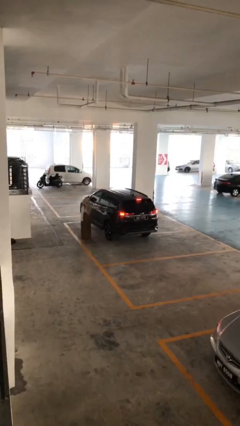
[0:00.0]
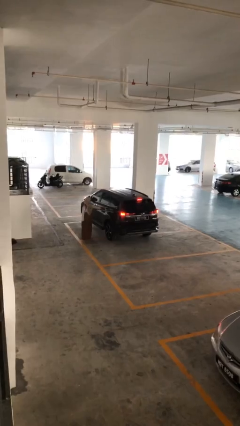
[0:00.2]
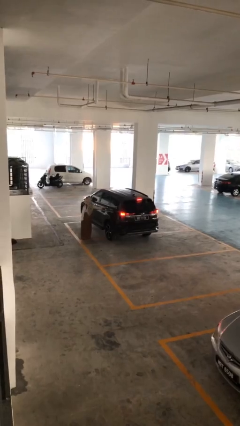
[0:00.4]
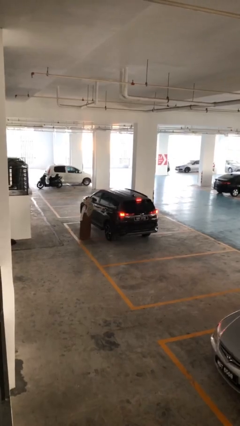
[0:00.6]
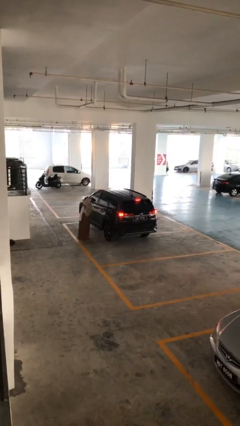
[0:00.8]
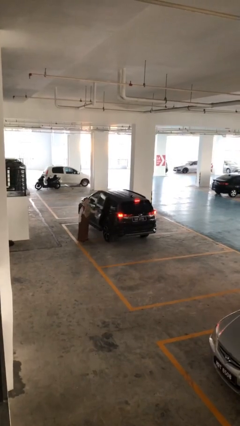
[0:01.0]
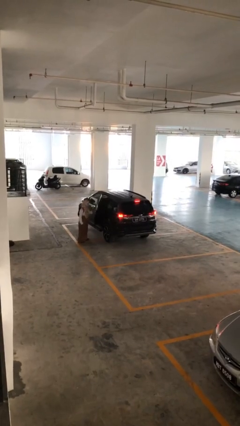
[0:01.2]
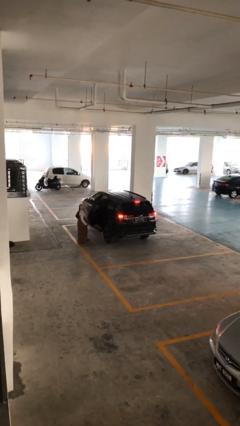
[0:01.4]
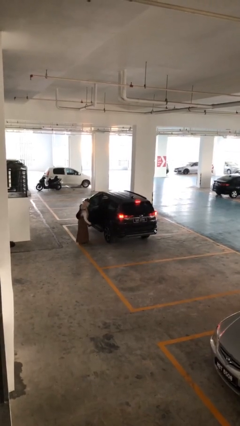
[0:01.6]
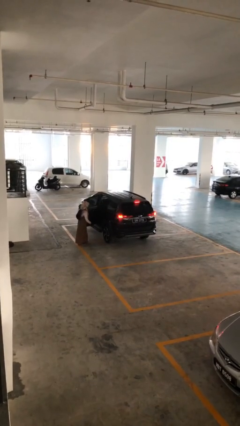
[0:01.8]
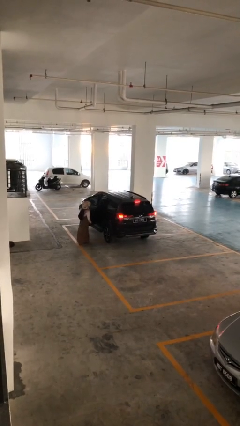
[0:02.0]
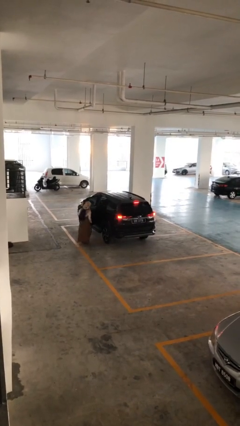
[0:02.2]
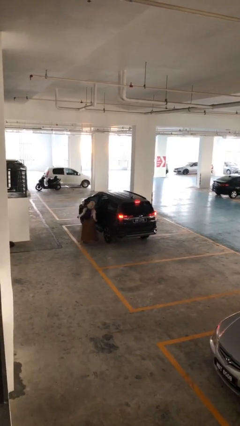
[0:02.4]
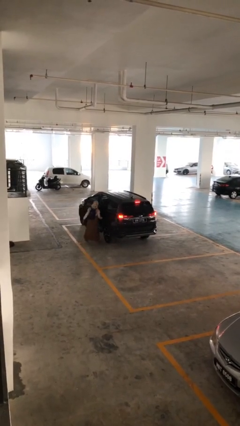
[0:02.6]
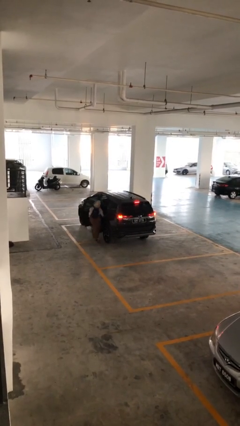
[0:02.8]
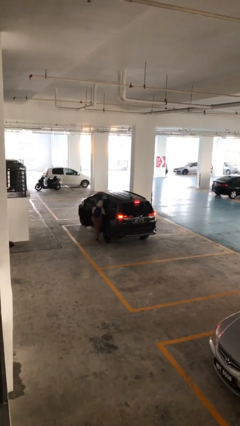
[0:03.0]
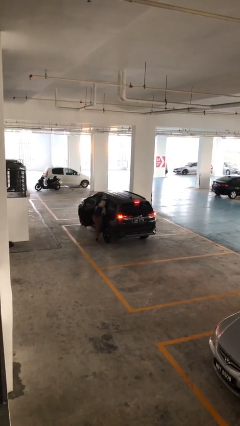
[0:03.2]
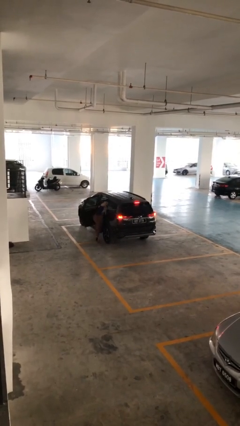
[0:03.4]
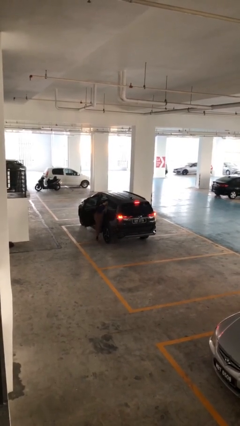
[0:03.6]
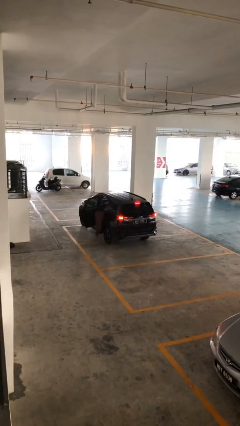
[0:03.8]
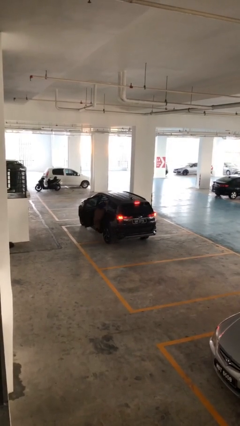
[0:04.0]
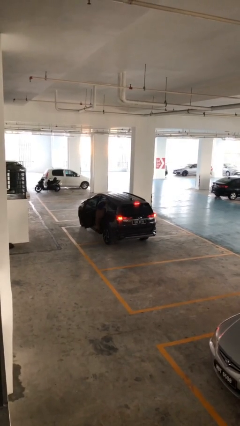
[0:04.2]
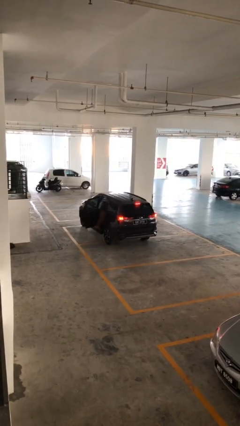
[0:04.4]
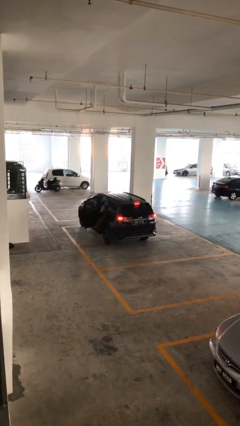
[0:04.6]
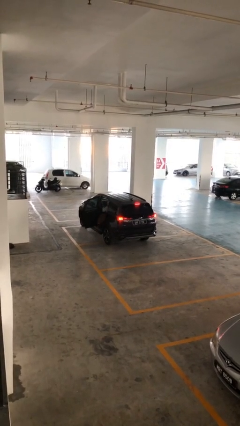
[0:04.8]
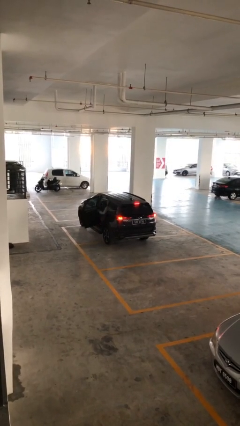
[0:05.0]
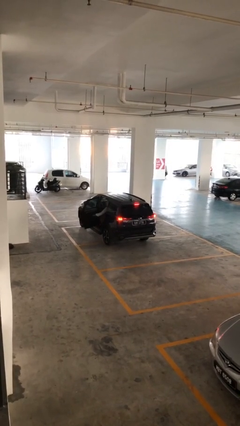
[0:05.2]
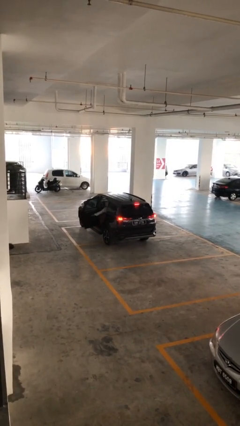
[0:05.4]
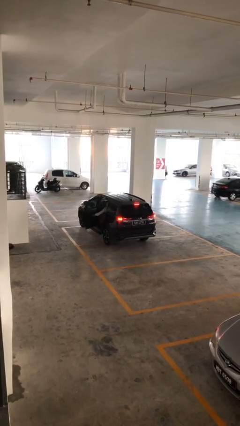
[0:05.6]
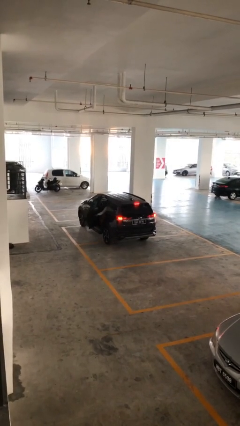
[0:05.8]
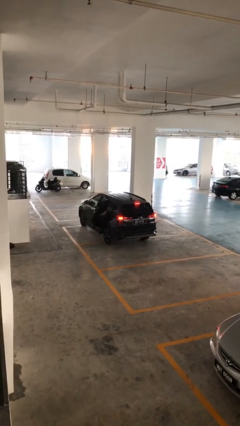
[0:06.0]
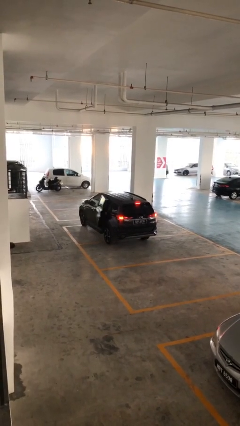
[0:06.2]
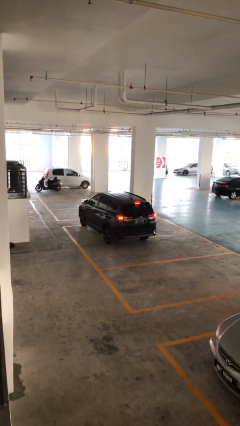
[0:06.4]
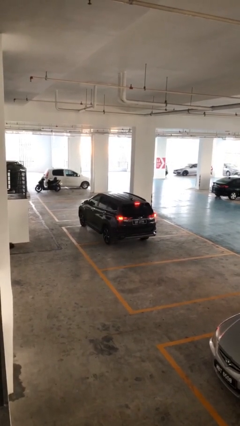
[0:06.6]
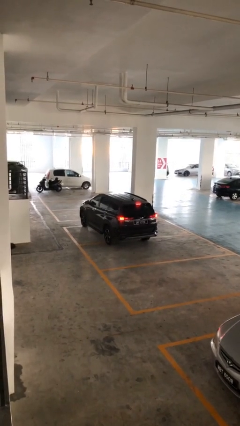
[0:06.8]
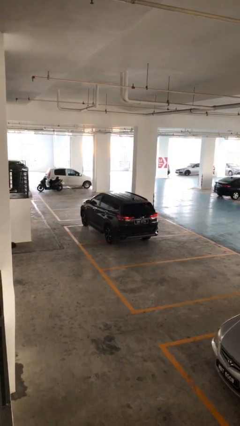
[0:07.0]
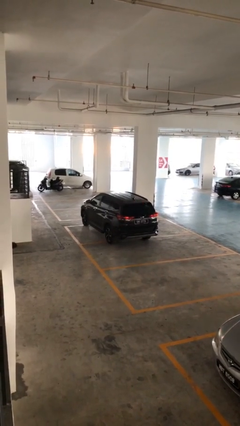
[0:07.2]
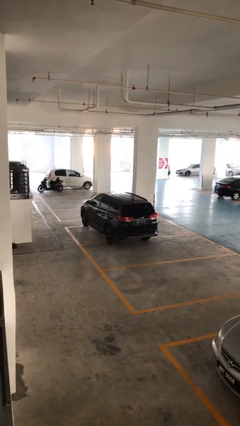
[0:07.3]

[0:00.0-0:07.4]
car picks up person

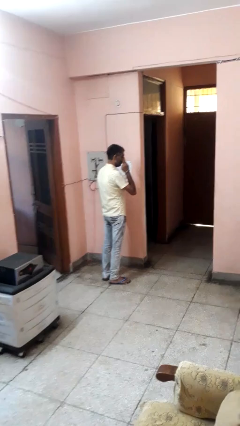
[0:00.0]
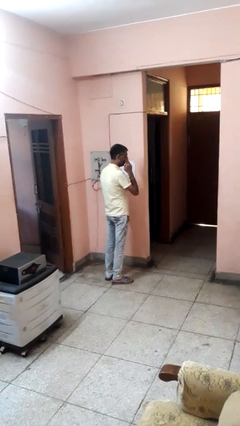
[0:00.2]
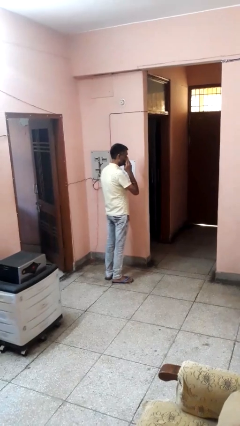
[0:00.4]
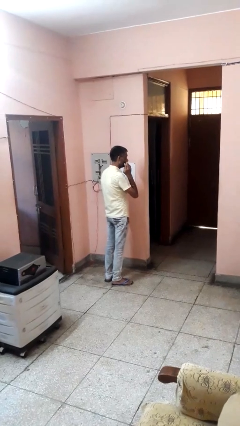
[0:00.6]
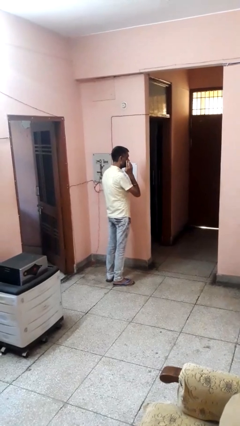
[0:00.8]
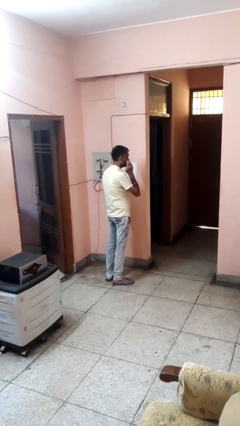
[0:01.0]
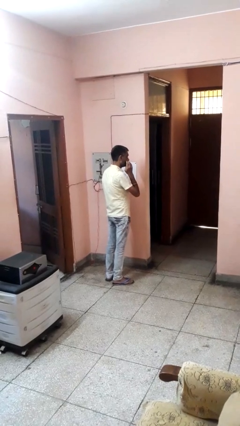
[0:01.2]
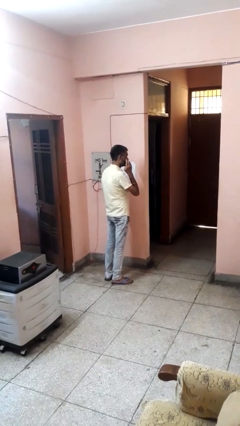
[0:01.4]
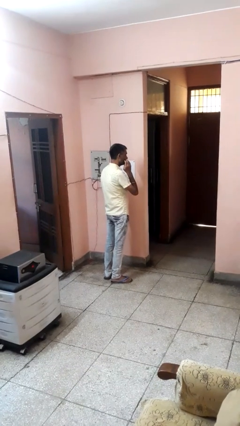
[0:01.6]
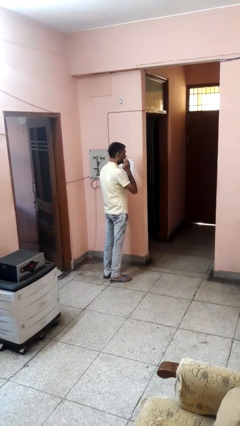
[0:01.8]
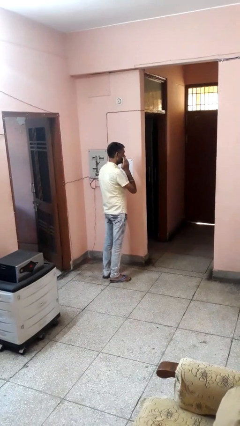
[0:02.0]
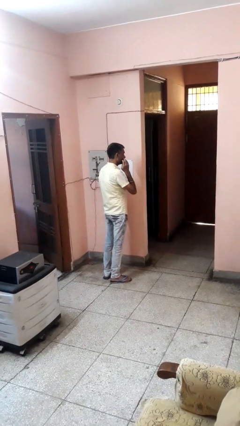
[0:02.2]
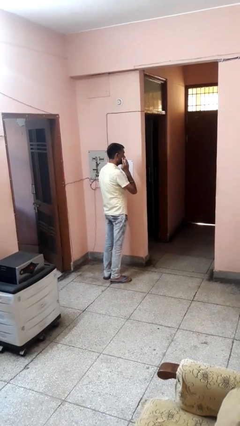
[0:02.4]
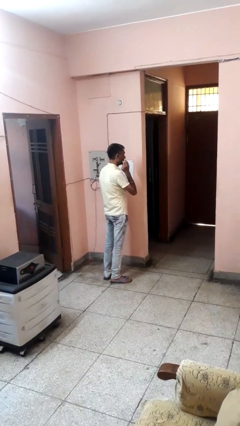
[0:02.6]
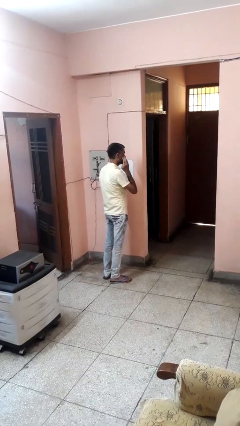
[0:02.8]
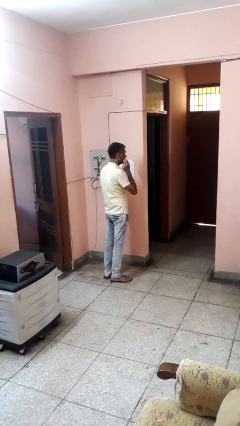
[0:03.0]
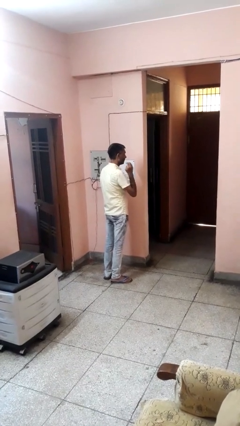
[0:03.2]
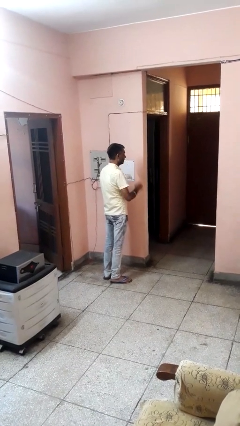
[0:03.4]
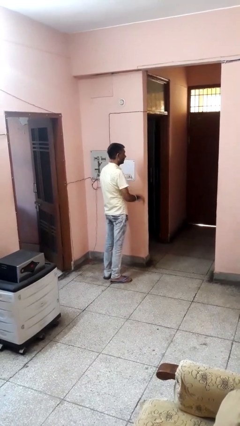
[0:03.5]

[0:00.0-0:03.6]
person scratches face

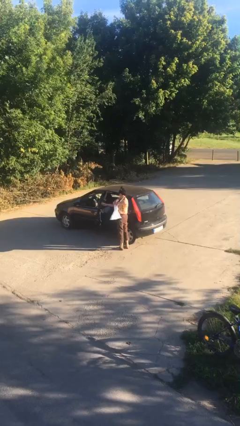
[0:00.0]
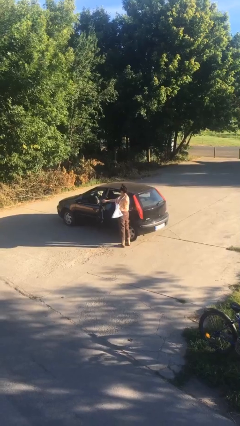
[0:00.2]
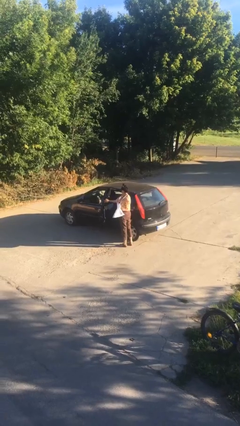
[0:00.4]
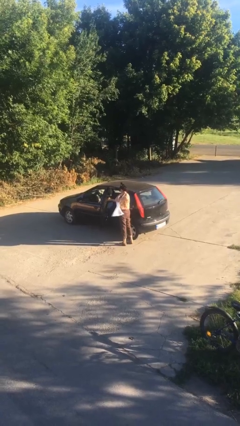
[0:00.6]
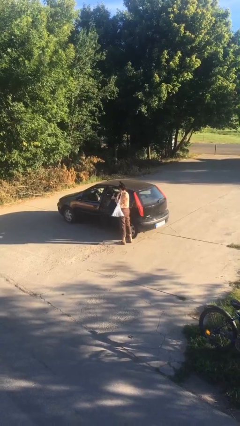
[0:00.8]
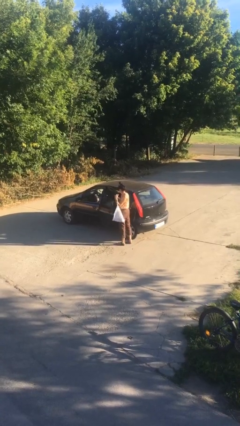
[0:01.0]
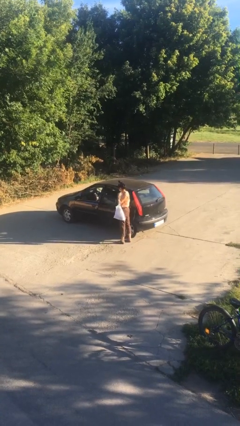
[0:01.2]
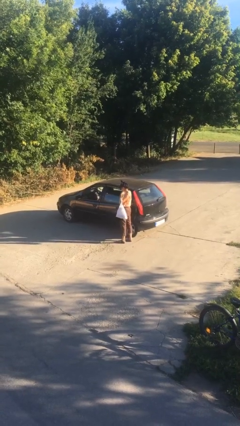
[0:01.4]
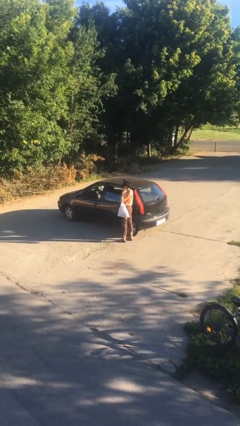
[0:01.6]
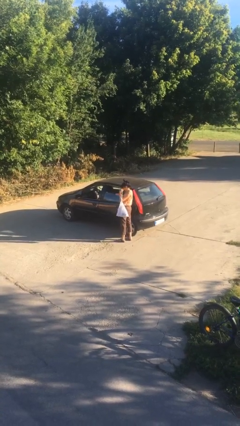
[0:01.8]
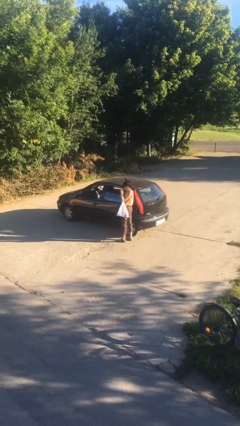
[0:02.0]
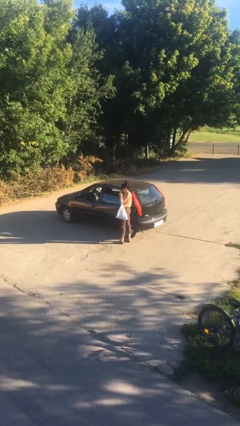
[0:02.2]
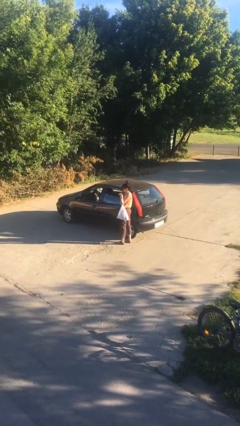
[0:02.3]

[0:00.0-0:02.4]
person closes car door

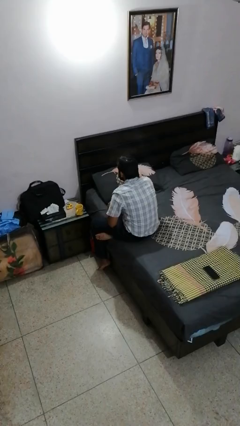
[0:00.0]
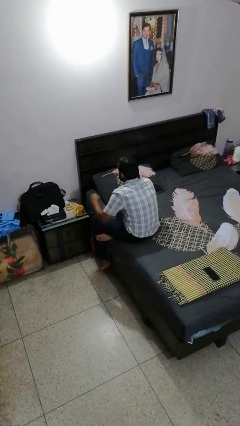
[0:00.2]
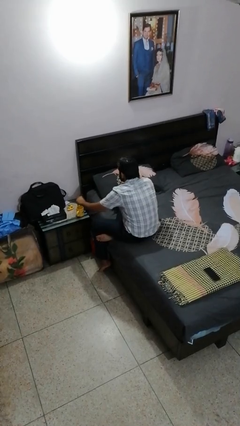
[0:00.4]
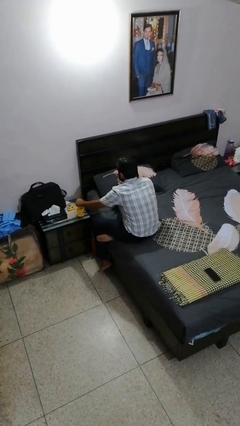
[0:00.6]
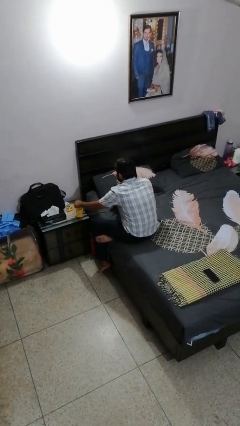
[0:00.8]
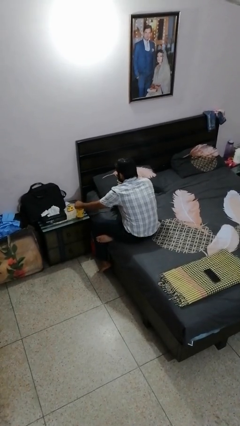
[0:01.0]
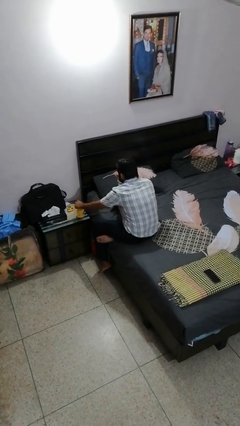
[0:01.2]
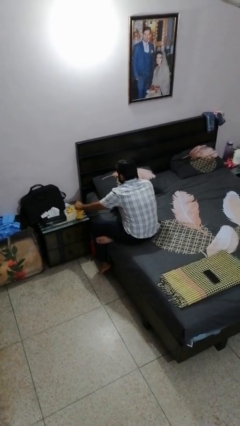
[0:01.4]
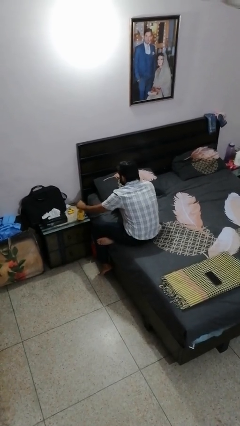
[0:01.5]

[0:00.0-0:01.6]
person stirs mug

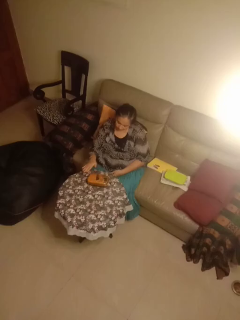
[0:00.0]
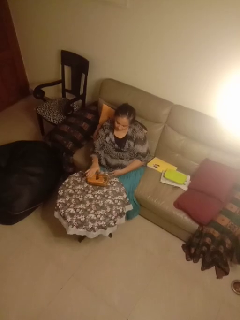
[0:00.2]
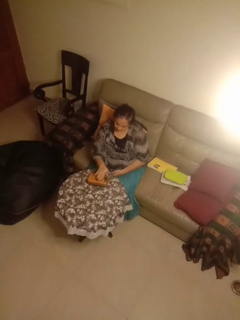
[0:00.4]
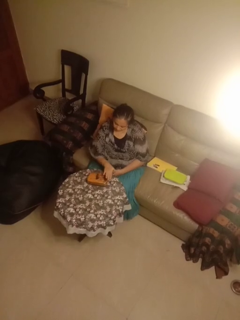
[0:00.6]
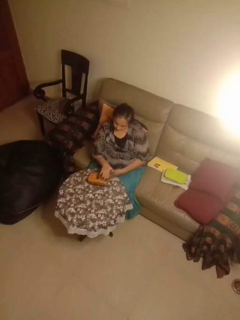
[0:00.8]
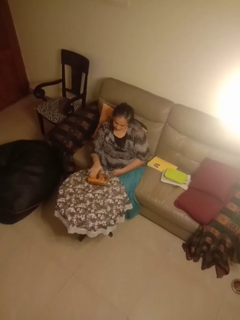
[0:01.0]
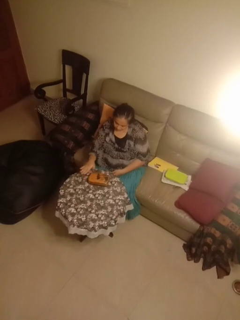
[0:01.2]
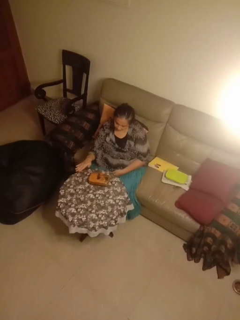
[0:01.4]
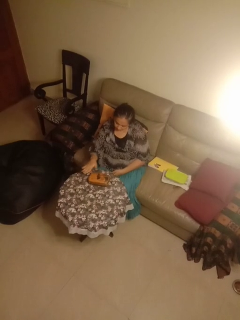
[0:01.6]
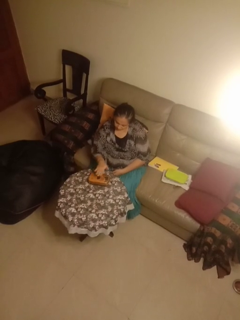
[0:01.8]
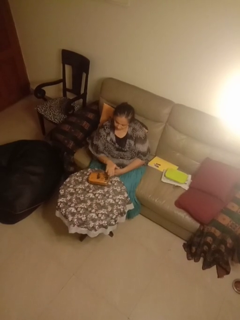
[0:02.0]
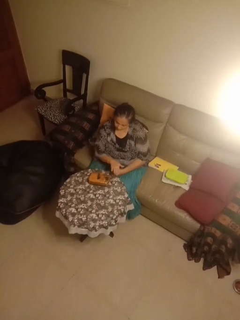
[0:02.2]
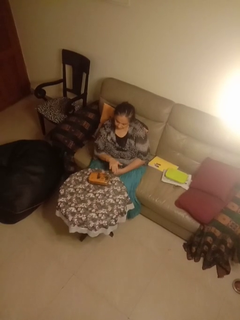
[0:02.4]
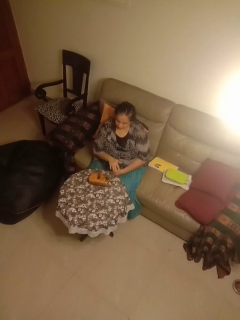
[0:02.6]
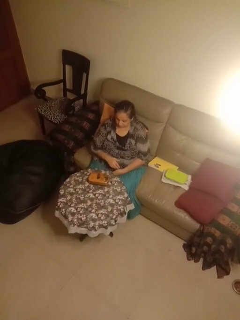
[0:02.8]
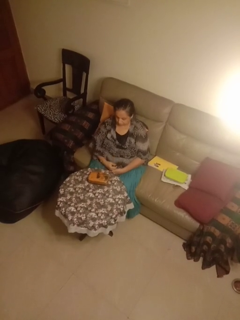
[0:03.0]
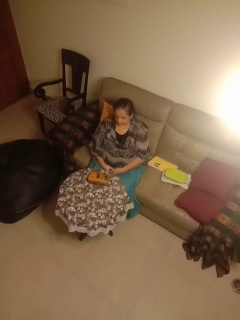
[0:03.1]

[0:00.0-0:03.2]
person waves hand over object

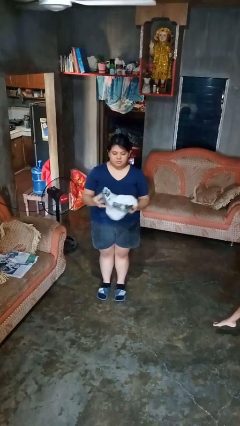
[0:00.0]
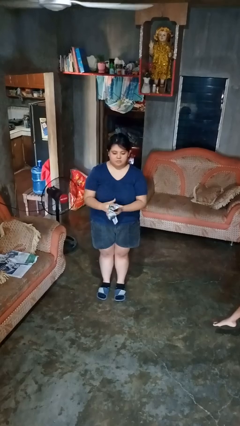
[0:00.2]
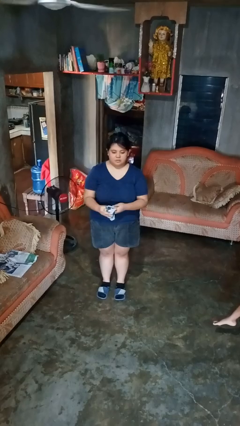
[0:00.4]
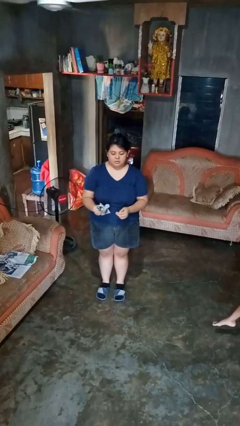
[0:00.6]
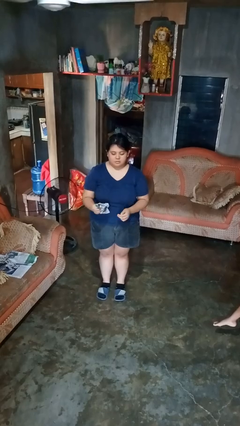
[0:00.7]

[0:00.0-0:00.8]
person crumples paper
